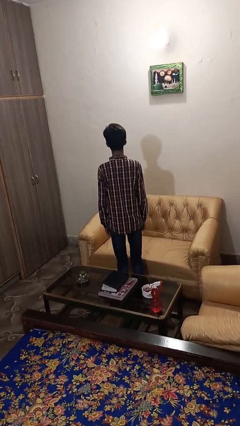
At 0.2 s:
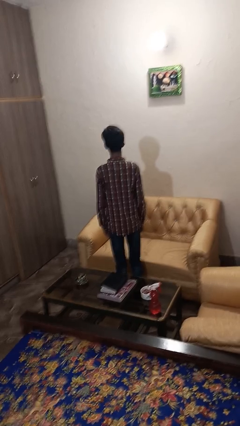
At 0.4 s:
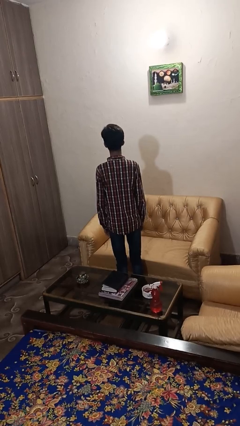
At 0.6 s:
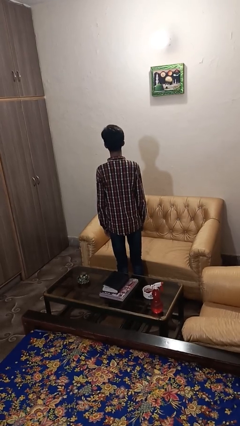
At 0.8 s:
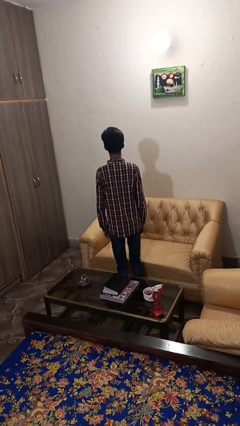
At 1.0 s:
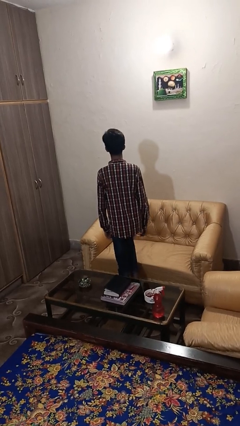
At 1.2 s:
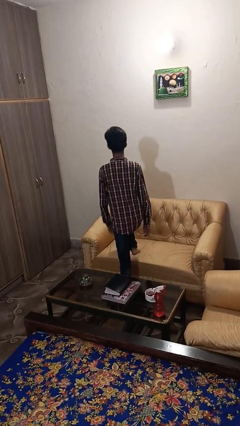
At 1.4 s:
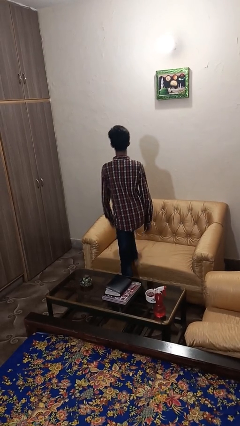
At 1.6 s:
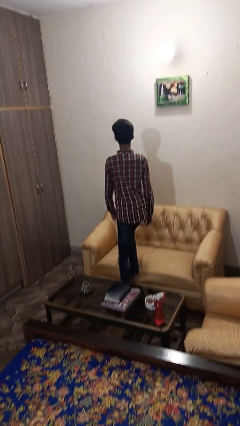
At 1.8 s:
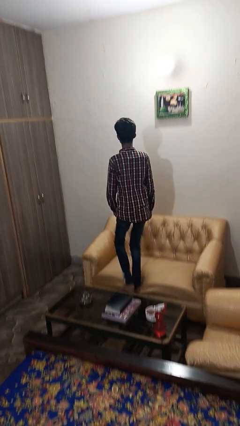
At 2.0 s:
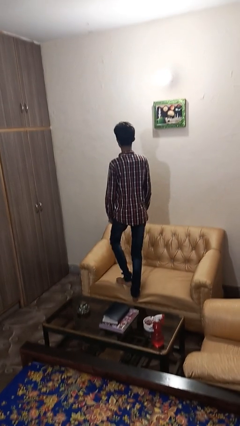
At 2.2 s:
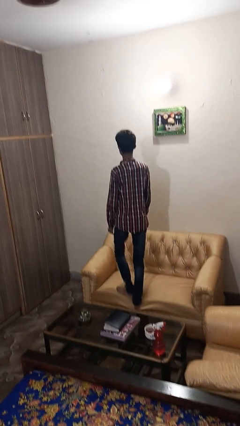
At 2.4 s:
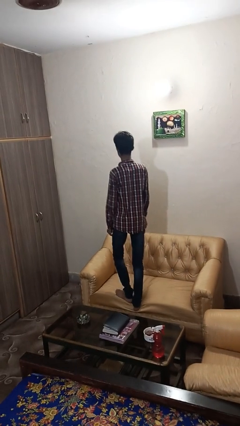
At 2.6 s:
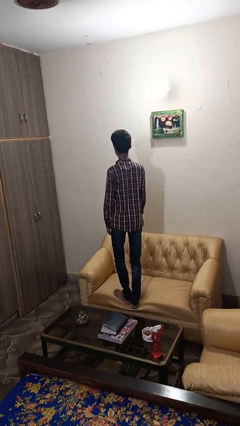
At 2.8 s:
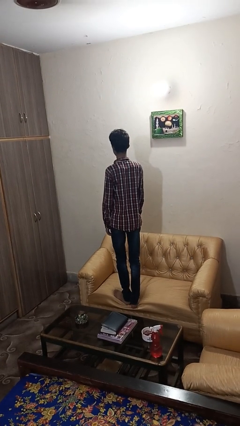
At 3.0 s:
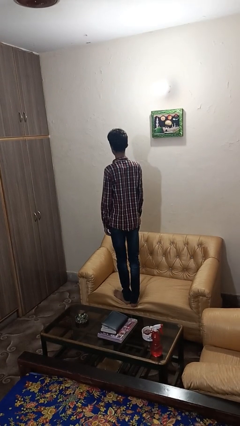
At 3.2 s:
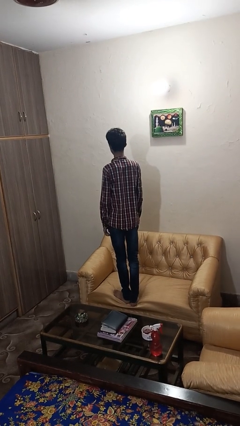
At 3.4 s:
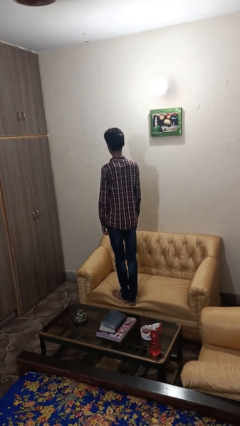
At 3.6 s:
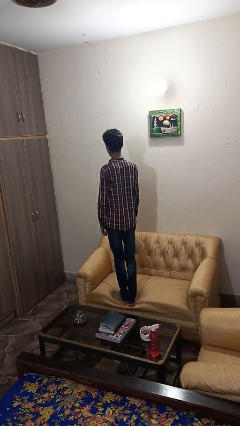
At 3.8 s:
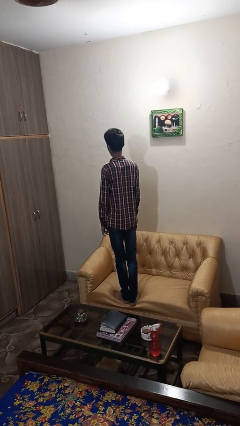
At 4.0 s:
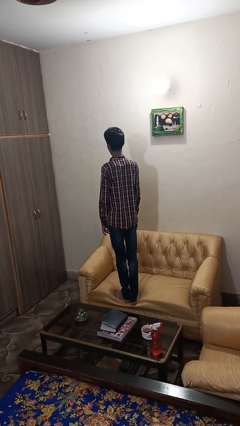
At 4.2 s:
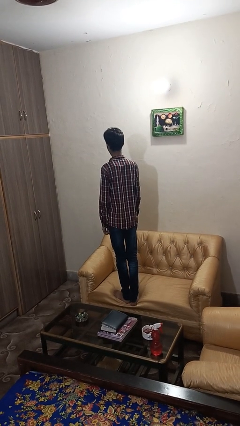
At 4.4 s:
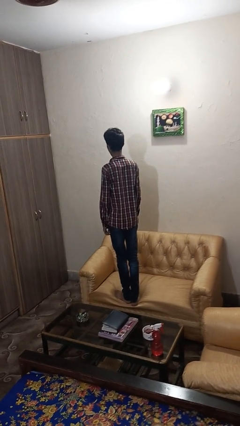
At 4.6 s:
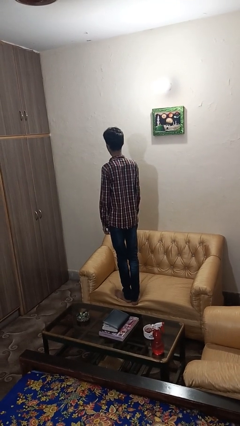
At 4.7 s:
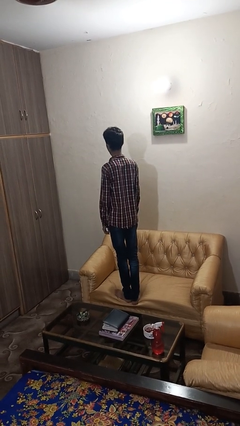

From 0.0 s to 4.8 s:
person climbs on couch

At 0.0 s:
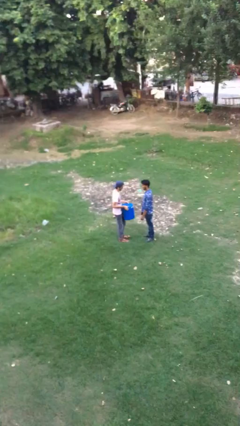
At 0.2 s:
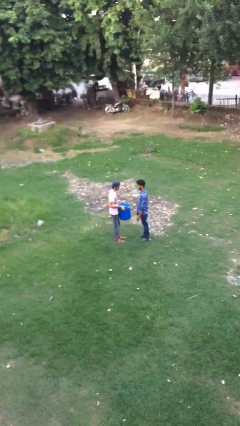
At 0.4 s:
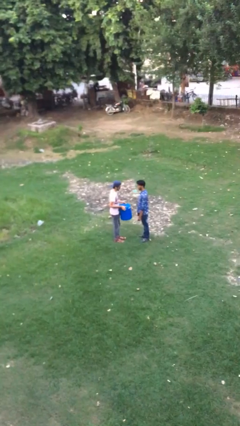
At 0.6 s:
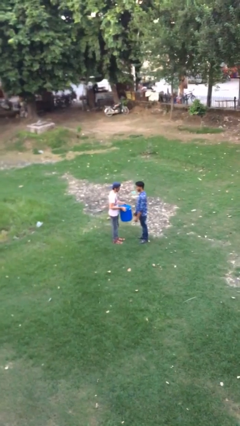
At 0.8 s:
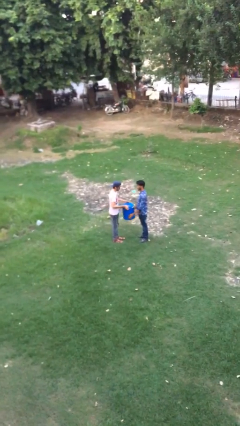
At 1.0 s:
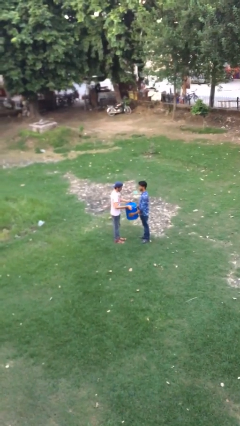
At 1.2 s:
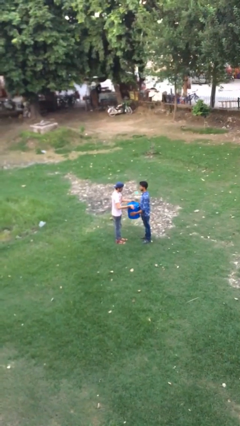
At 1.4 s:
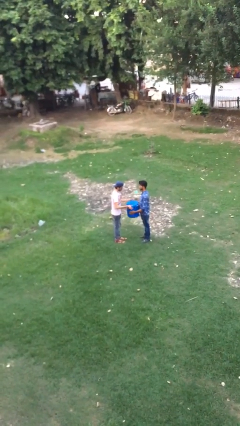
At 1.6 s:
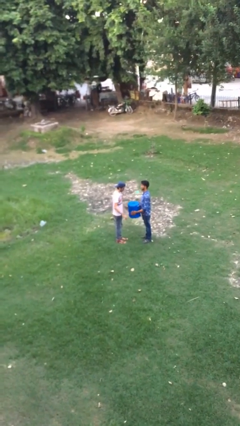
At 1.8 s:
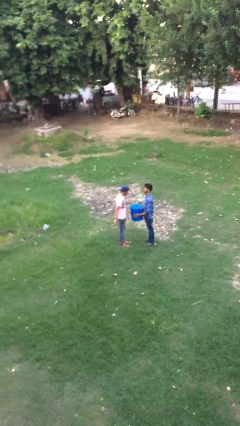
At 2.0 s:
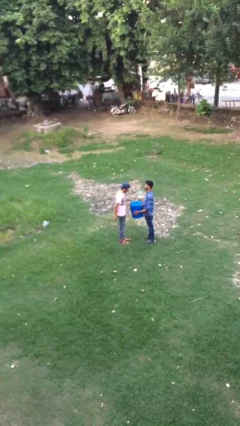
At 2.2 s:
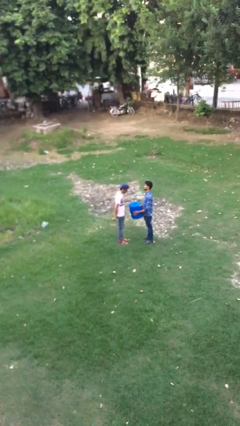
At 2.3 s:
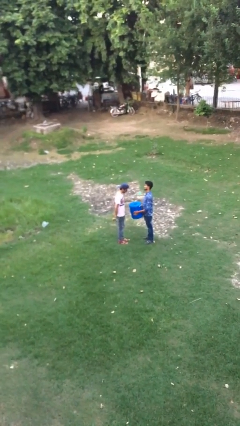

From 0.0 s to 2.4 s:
person transfers object to person

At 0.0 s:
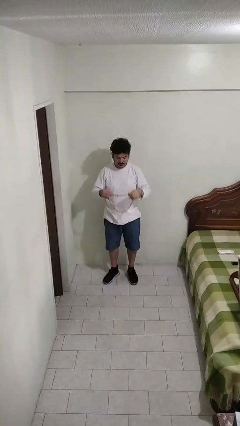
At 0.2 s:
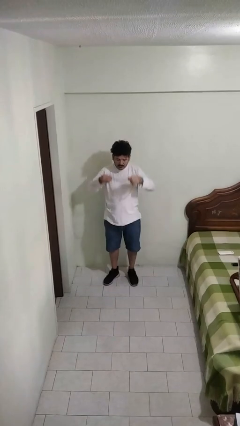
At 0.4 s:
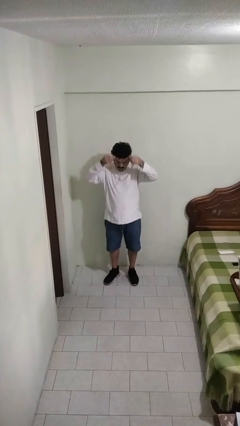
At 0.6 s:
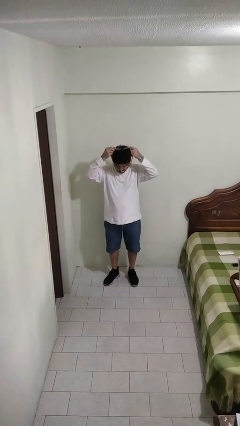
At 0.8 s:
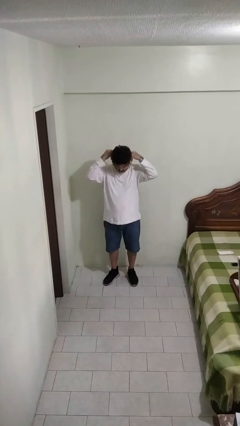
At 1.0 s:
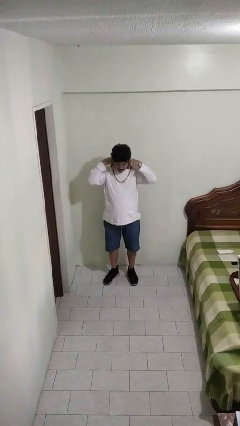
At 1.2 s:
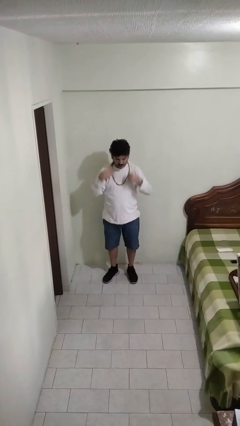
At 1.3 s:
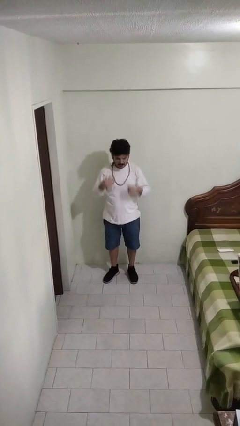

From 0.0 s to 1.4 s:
person puts on necklace

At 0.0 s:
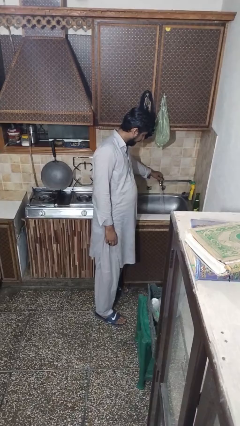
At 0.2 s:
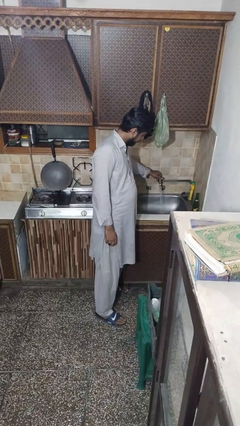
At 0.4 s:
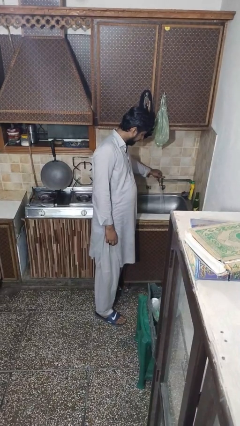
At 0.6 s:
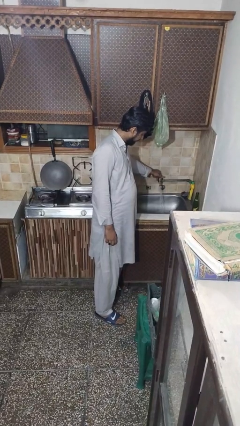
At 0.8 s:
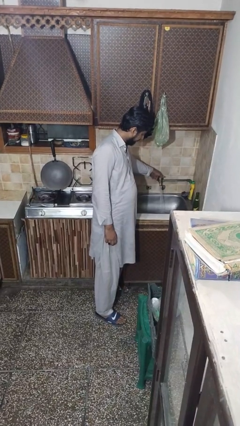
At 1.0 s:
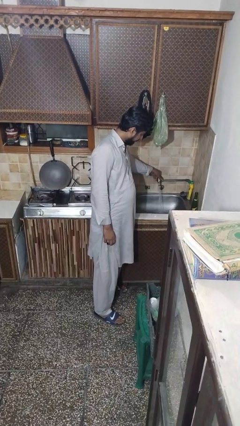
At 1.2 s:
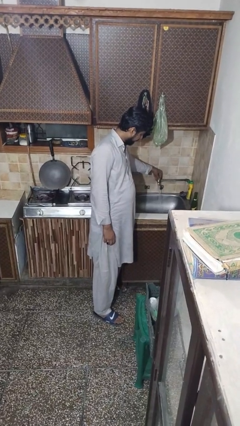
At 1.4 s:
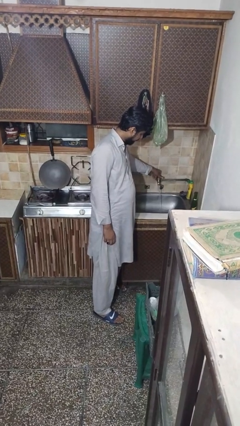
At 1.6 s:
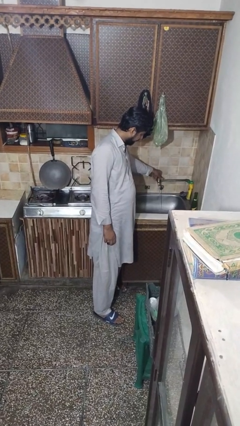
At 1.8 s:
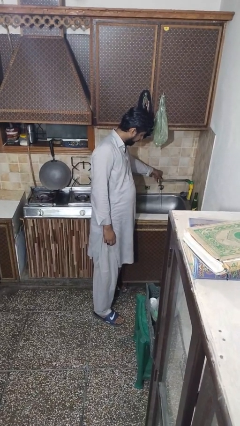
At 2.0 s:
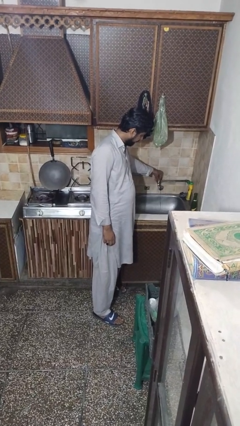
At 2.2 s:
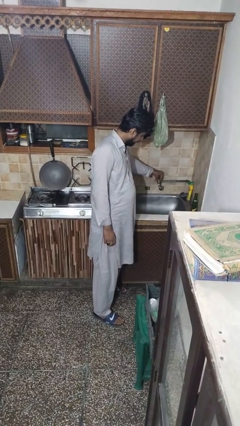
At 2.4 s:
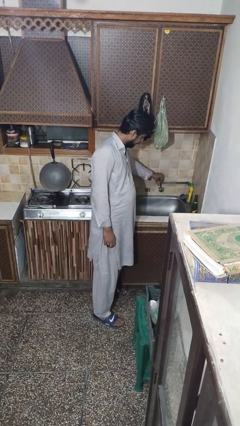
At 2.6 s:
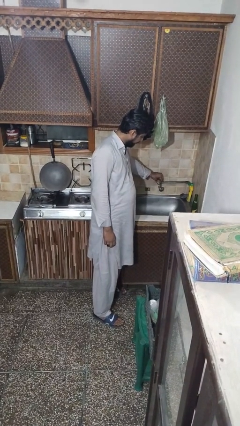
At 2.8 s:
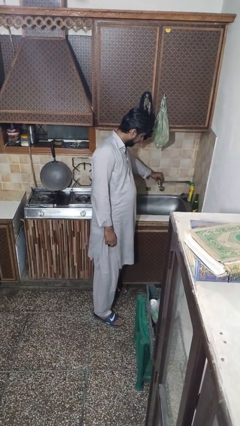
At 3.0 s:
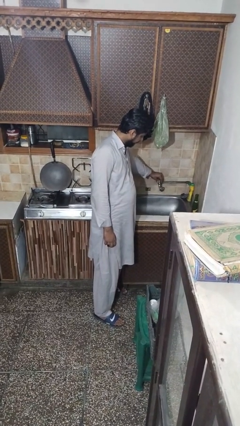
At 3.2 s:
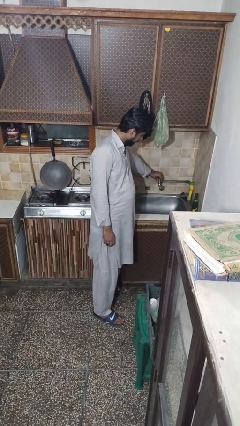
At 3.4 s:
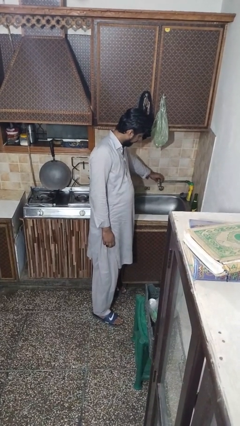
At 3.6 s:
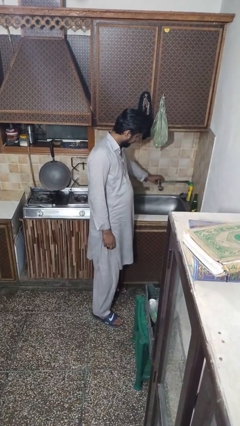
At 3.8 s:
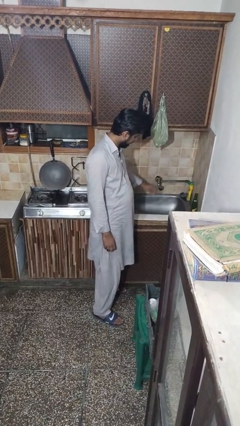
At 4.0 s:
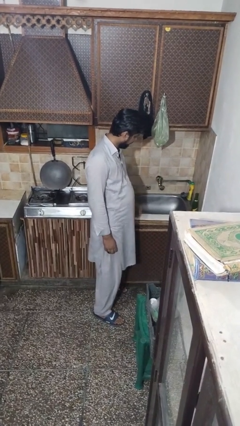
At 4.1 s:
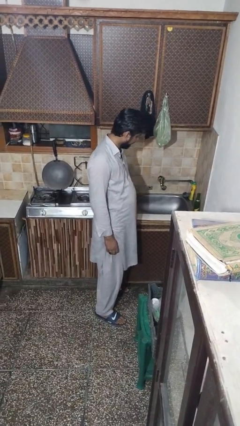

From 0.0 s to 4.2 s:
person turns off faucet

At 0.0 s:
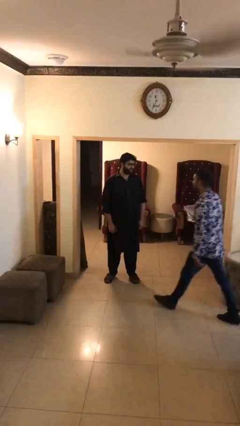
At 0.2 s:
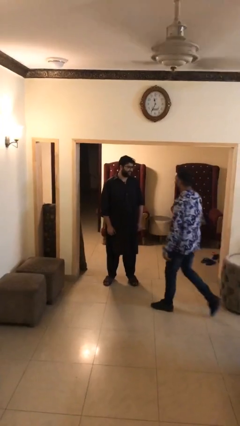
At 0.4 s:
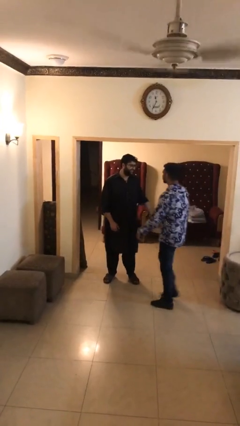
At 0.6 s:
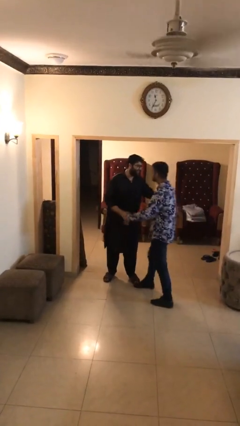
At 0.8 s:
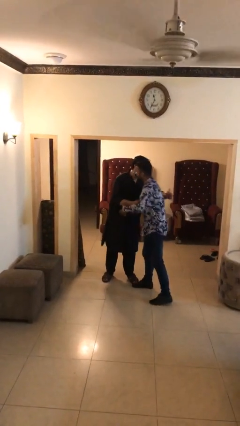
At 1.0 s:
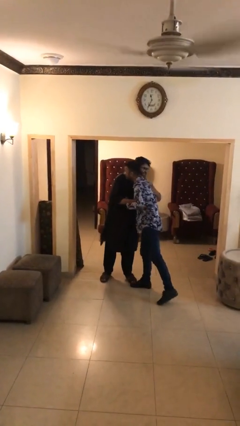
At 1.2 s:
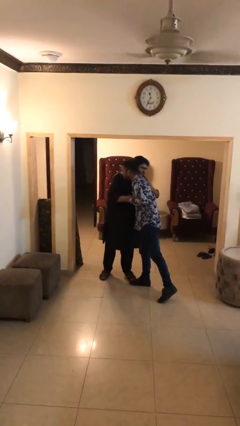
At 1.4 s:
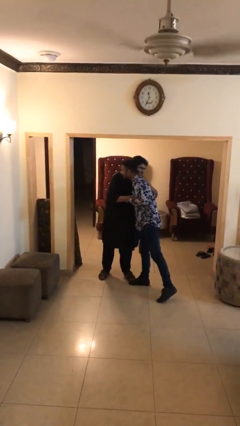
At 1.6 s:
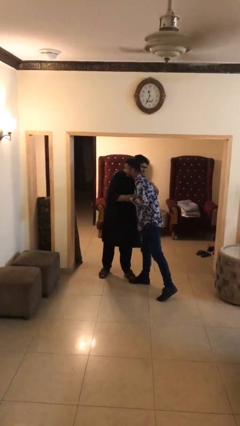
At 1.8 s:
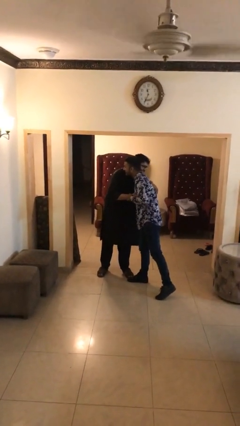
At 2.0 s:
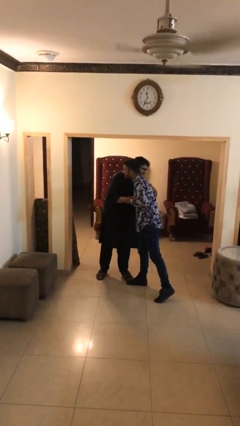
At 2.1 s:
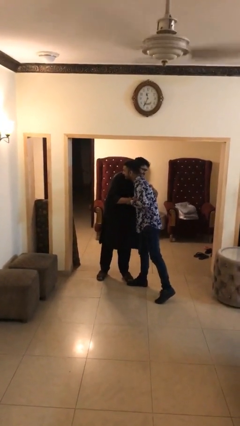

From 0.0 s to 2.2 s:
person embraces person

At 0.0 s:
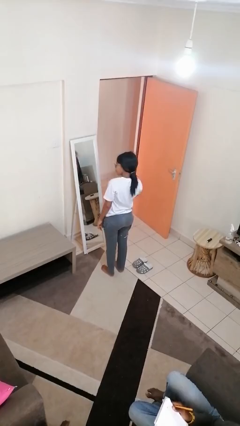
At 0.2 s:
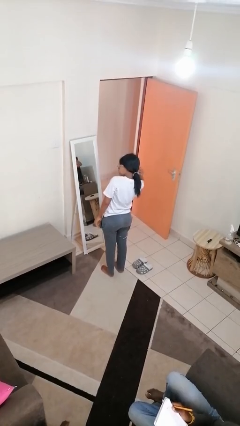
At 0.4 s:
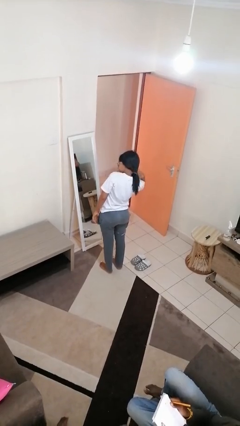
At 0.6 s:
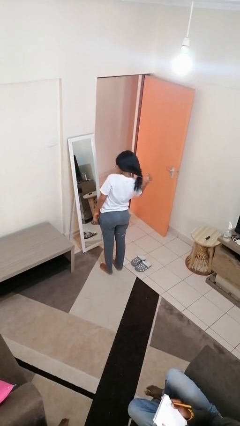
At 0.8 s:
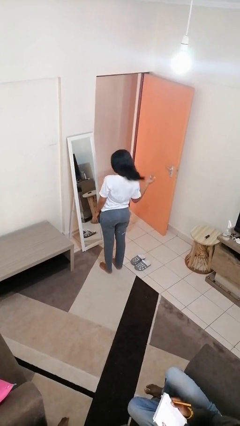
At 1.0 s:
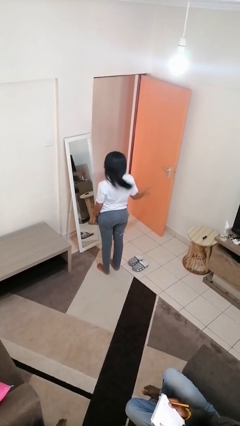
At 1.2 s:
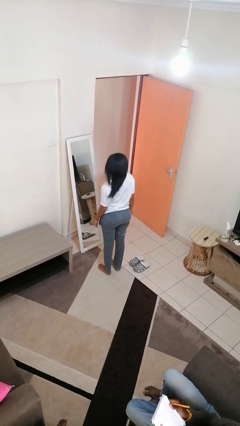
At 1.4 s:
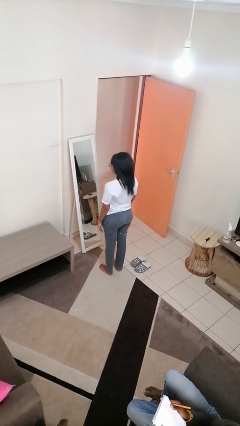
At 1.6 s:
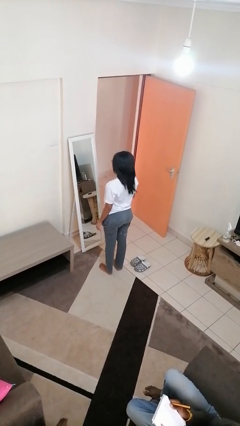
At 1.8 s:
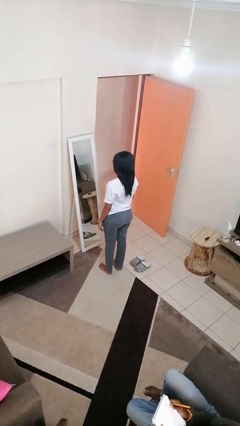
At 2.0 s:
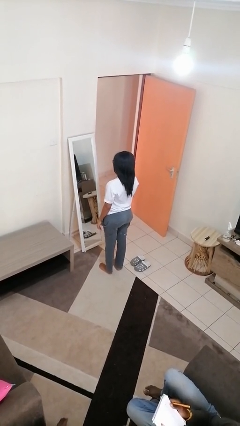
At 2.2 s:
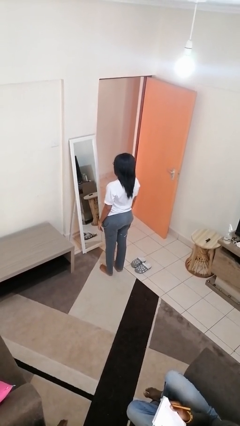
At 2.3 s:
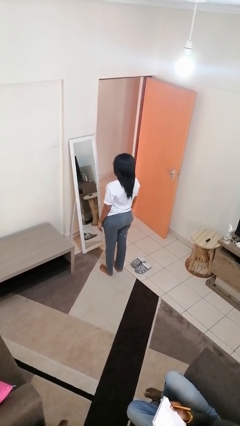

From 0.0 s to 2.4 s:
person takes off hairtie
